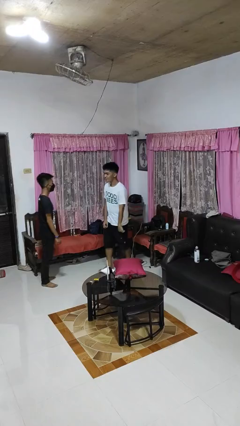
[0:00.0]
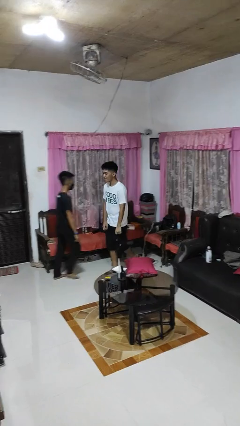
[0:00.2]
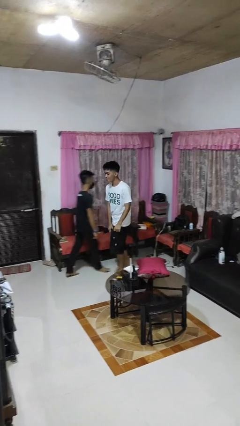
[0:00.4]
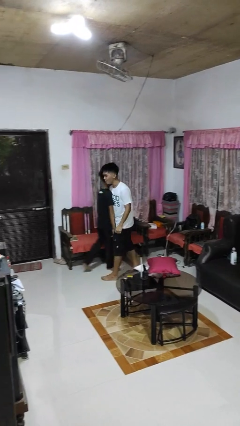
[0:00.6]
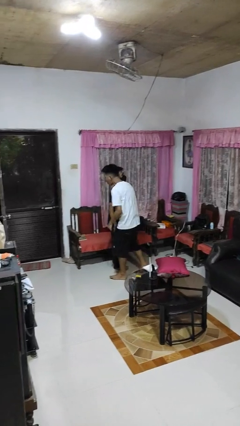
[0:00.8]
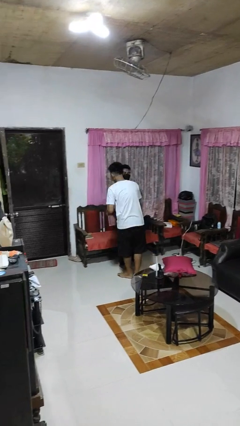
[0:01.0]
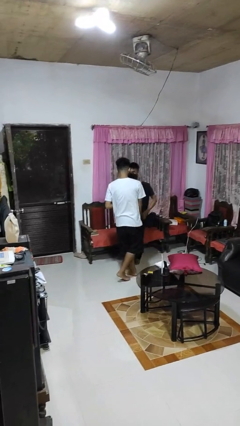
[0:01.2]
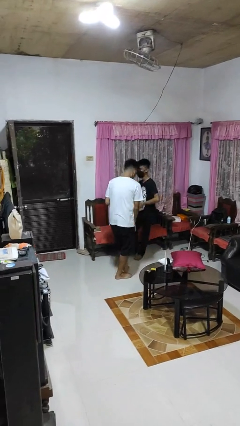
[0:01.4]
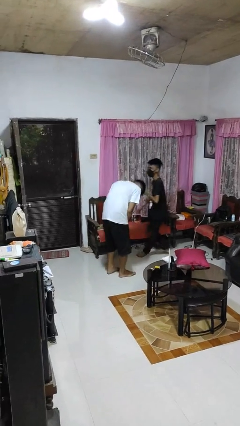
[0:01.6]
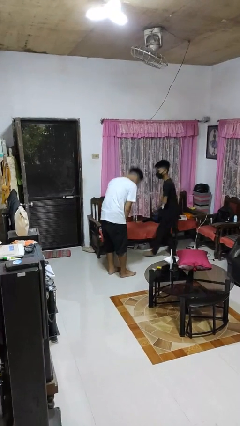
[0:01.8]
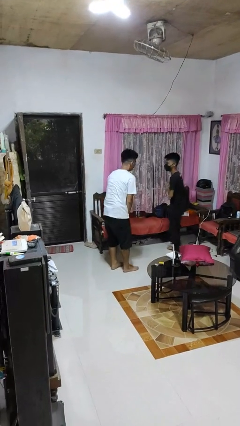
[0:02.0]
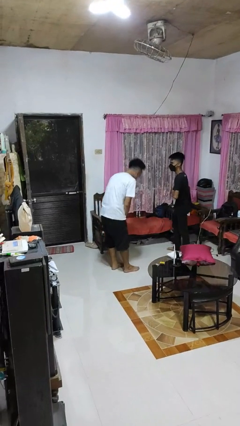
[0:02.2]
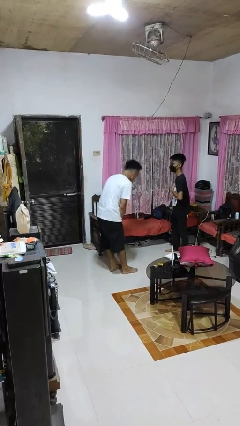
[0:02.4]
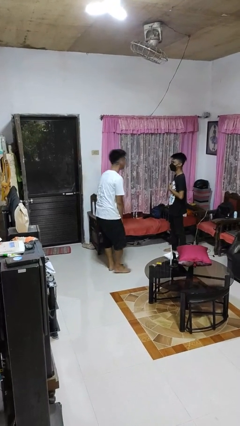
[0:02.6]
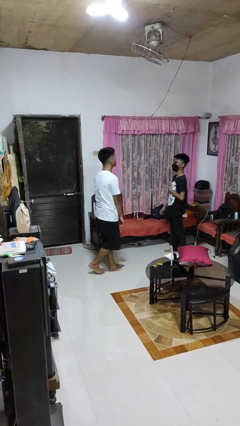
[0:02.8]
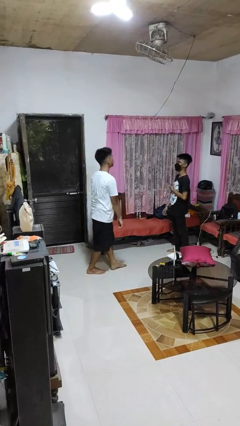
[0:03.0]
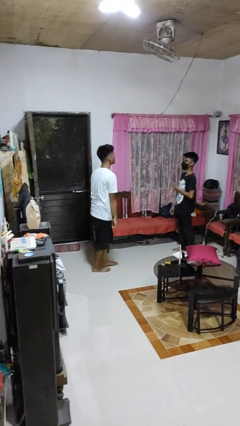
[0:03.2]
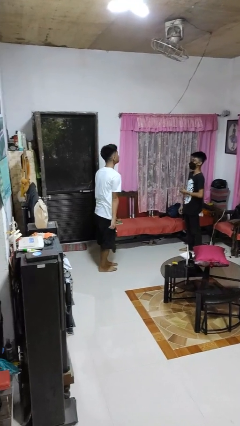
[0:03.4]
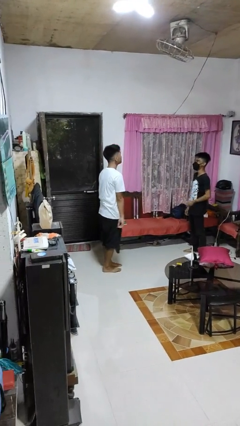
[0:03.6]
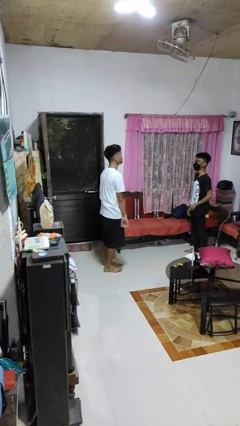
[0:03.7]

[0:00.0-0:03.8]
person bumps into person

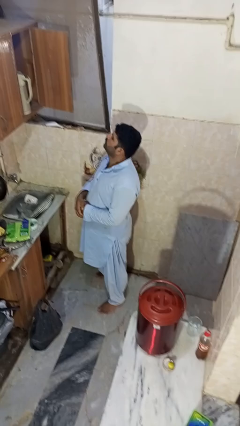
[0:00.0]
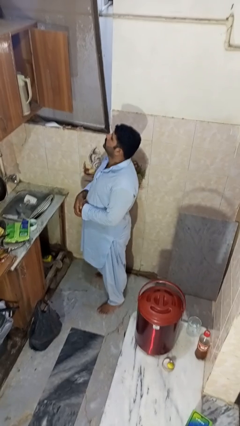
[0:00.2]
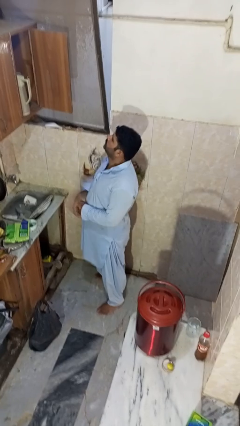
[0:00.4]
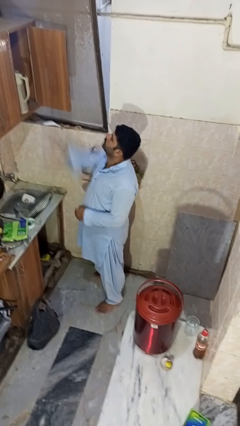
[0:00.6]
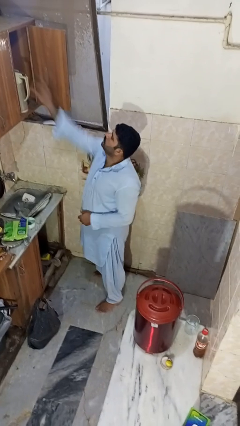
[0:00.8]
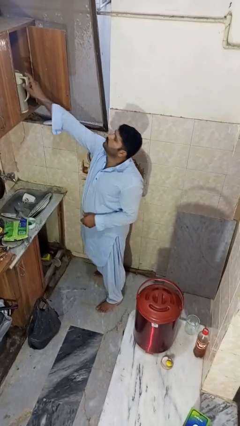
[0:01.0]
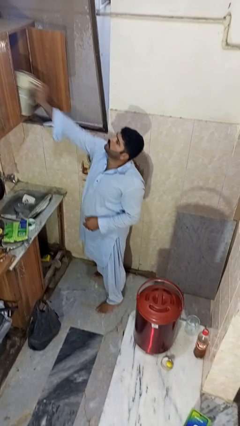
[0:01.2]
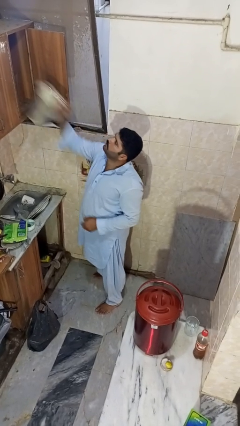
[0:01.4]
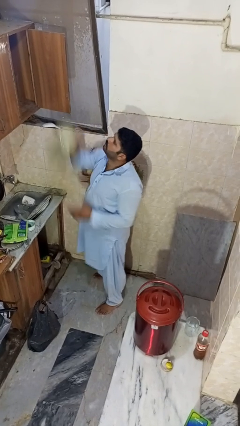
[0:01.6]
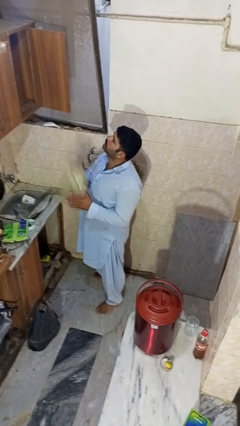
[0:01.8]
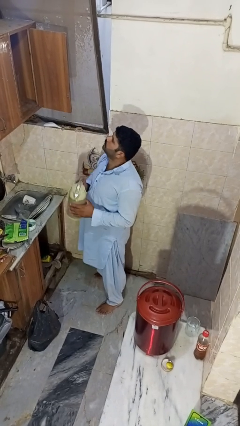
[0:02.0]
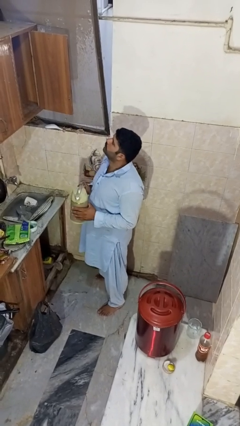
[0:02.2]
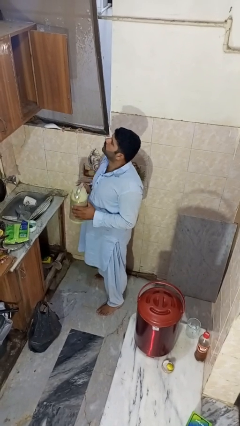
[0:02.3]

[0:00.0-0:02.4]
person takes object from cabinet

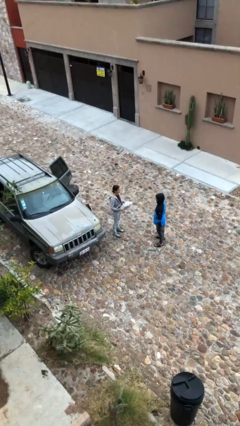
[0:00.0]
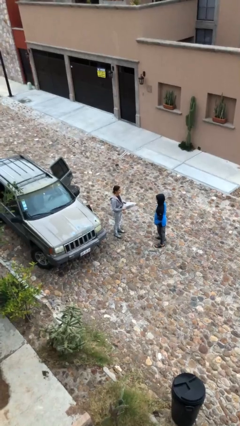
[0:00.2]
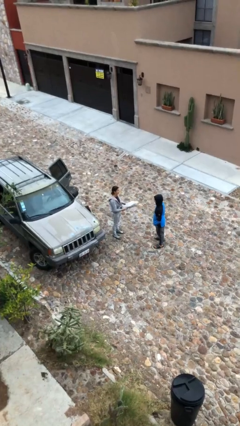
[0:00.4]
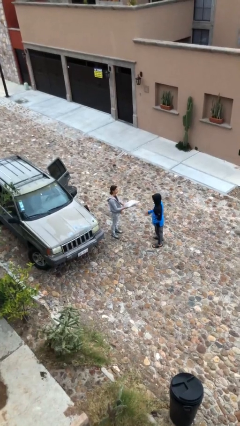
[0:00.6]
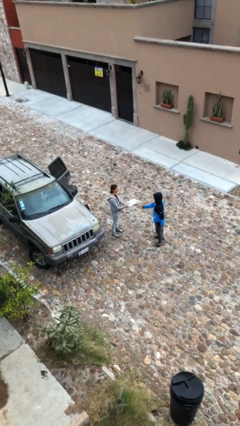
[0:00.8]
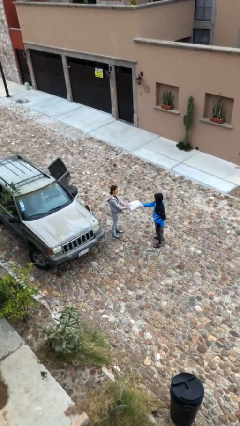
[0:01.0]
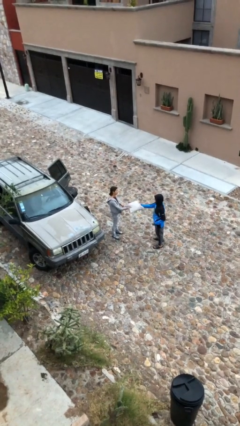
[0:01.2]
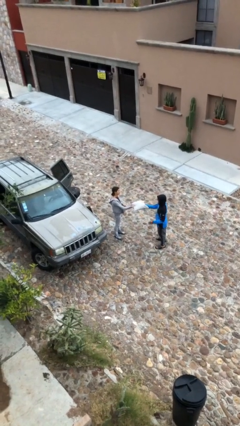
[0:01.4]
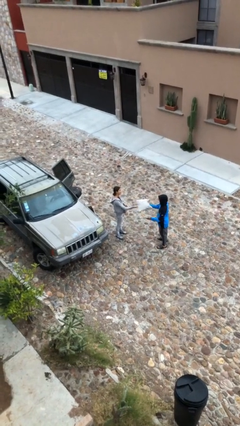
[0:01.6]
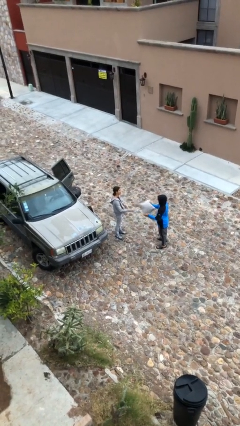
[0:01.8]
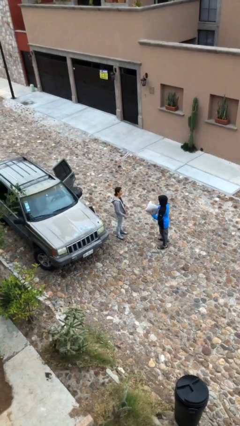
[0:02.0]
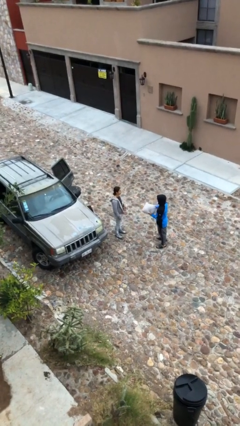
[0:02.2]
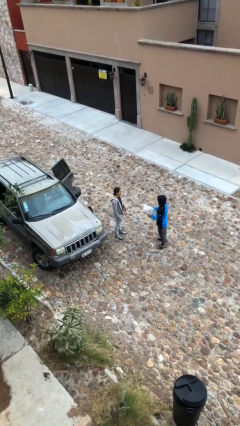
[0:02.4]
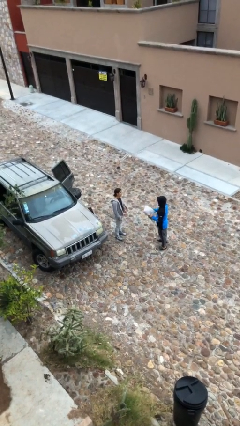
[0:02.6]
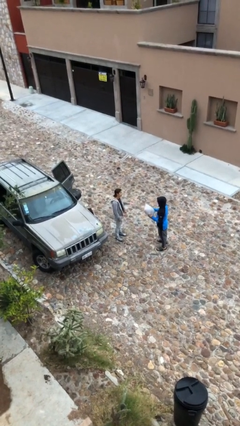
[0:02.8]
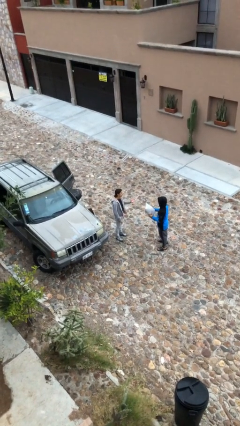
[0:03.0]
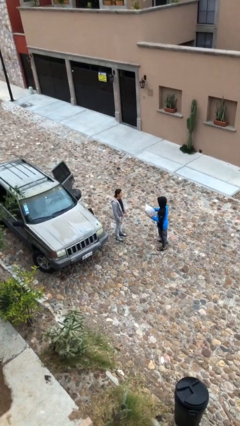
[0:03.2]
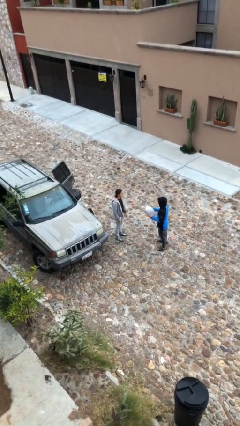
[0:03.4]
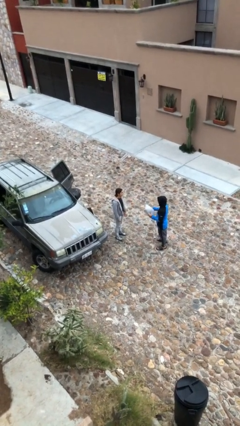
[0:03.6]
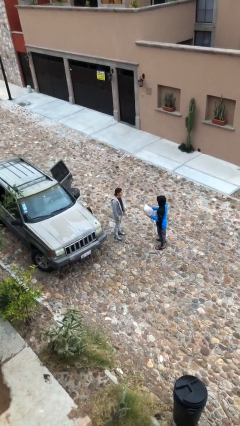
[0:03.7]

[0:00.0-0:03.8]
person transfers object to person

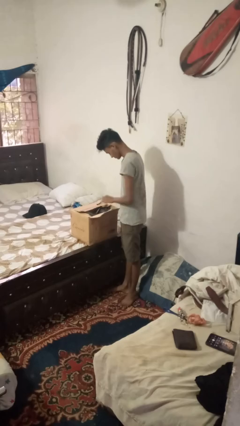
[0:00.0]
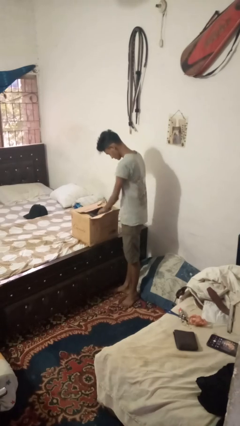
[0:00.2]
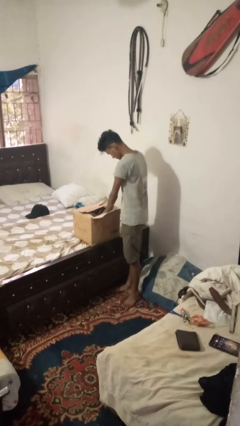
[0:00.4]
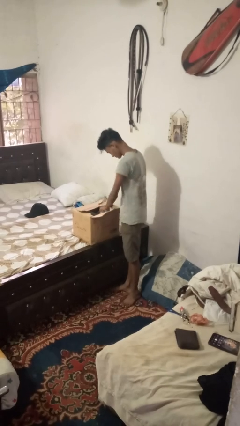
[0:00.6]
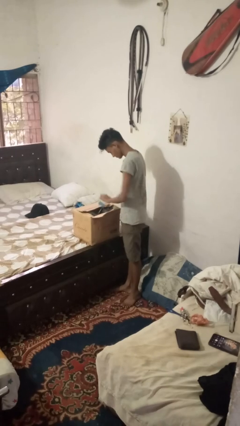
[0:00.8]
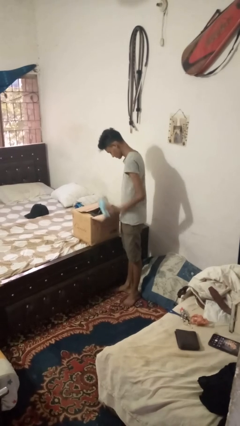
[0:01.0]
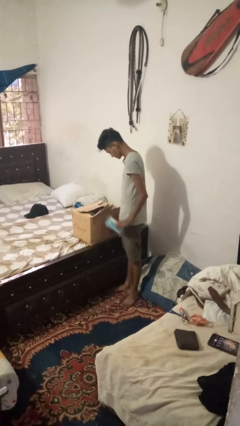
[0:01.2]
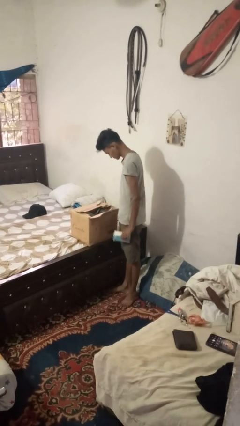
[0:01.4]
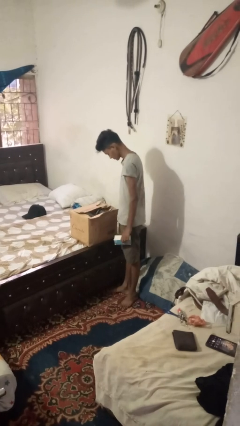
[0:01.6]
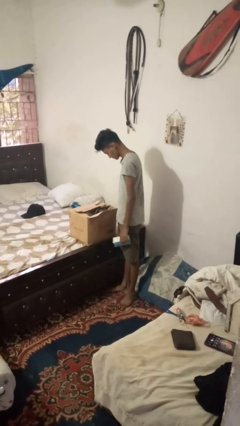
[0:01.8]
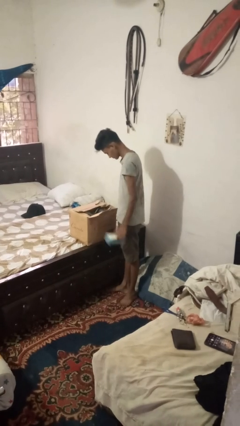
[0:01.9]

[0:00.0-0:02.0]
person takes object from box

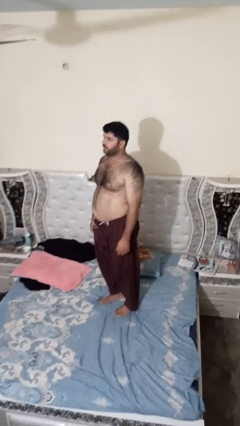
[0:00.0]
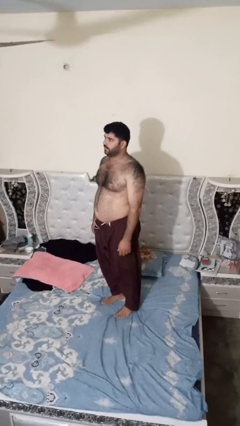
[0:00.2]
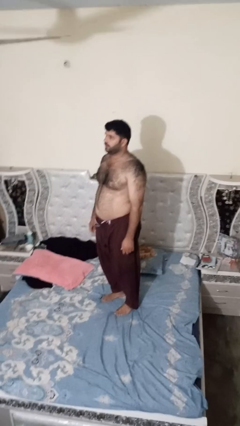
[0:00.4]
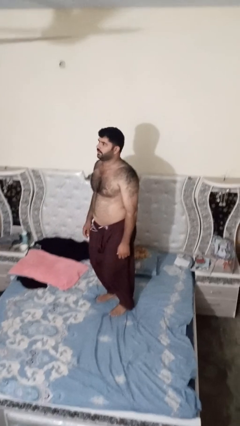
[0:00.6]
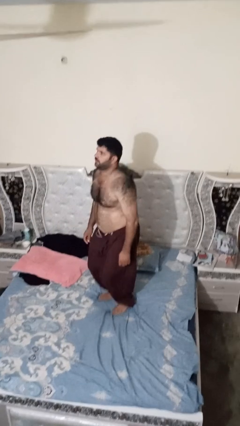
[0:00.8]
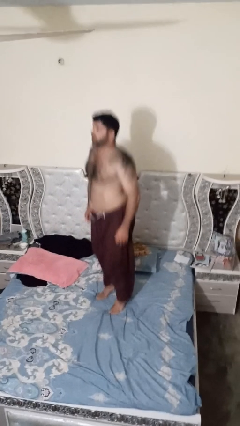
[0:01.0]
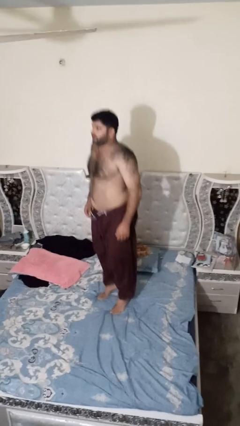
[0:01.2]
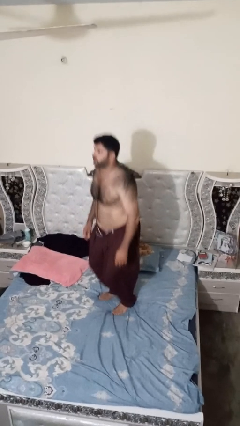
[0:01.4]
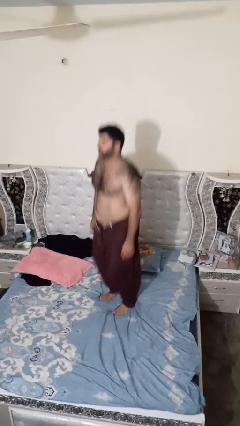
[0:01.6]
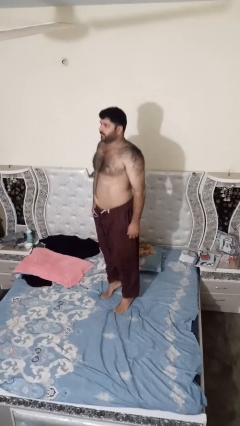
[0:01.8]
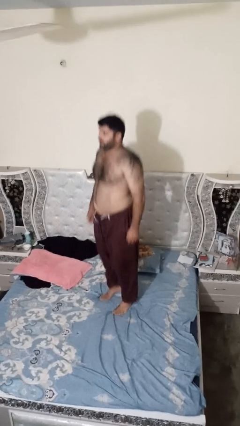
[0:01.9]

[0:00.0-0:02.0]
person jumps on bed

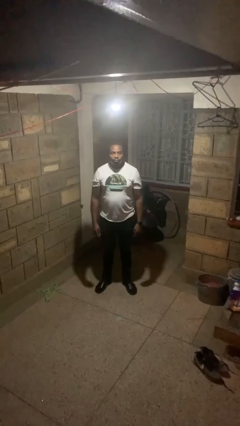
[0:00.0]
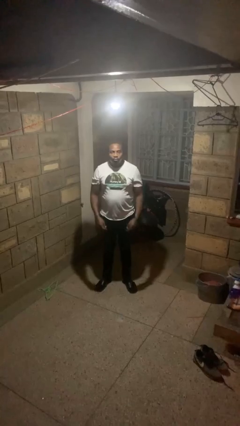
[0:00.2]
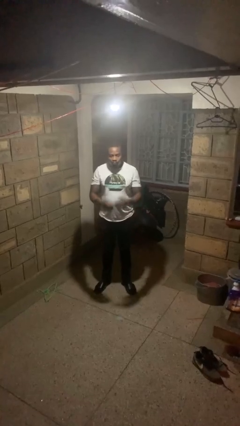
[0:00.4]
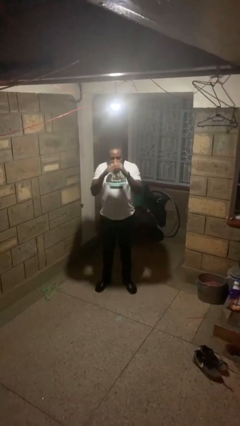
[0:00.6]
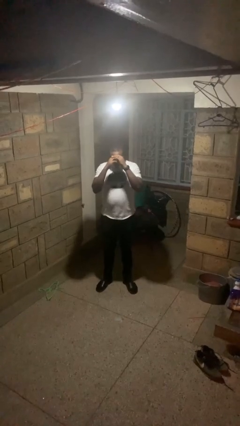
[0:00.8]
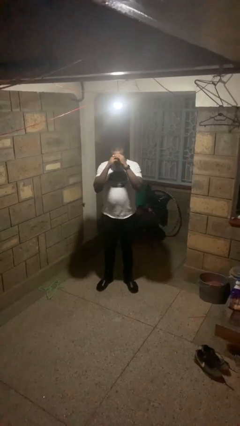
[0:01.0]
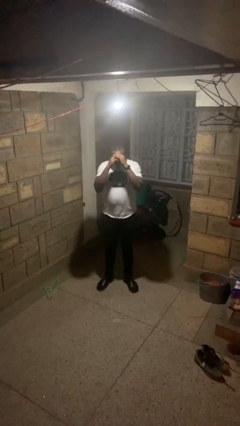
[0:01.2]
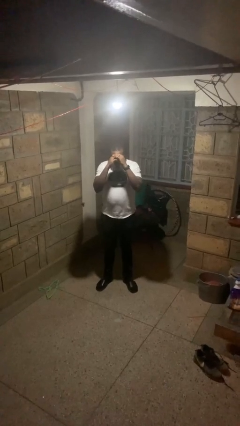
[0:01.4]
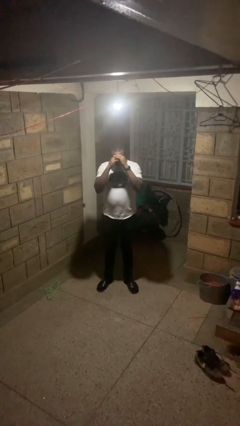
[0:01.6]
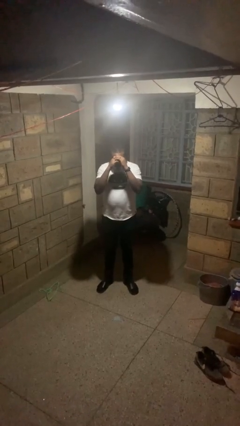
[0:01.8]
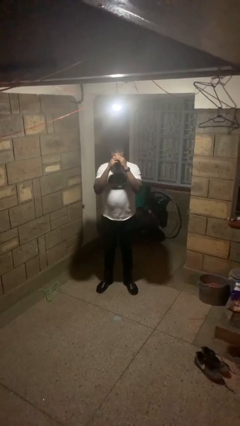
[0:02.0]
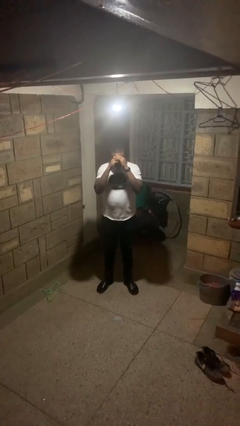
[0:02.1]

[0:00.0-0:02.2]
person shades eyes

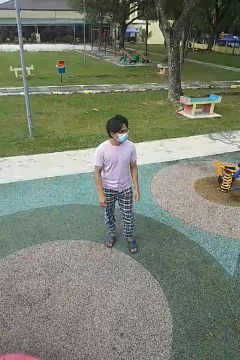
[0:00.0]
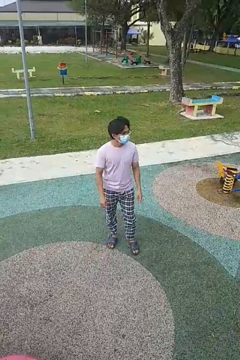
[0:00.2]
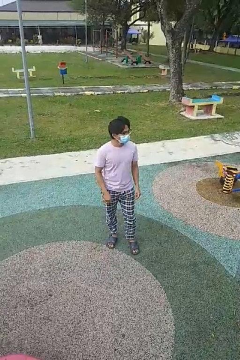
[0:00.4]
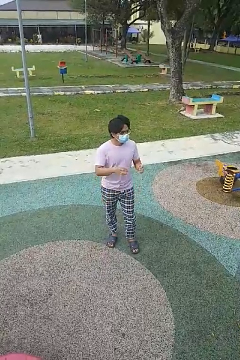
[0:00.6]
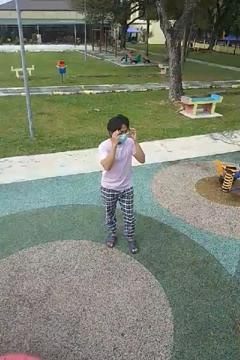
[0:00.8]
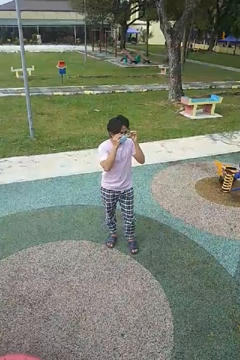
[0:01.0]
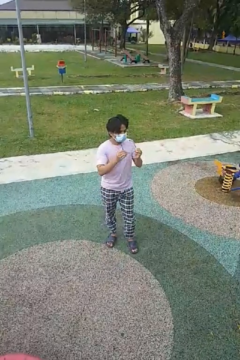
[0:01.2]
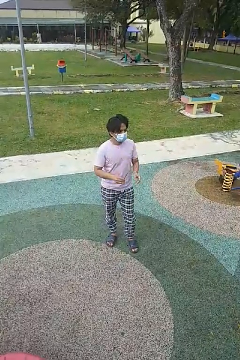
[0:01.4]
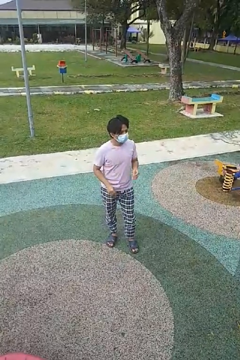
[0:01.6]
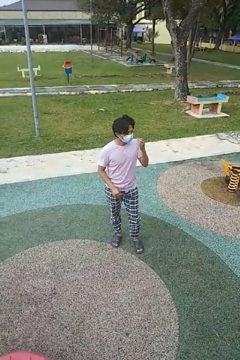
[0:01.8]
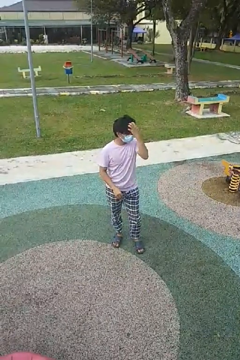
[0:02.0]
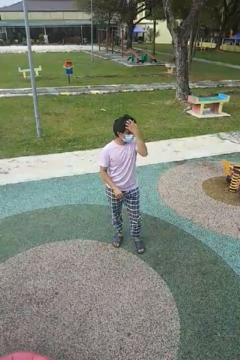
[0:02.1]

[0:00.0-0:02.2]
person takes off glasses
